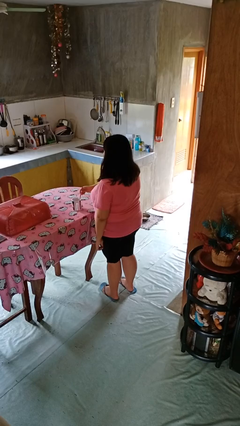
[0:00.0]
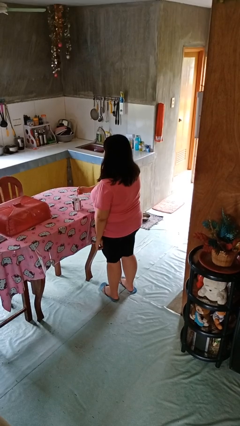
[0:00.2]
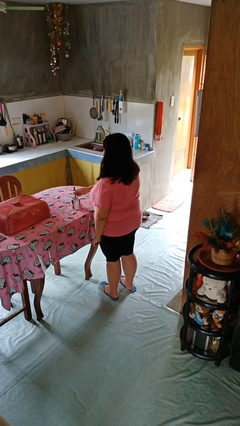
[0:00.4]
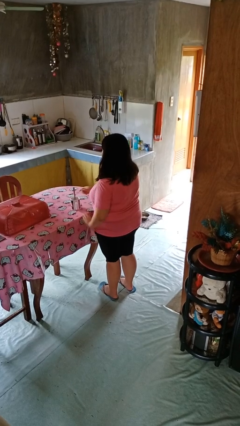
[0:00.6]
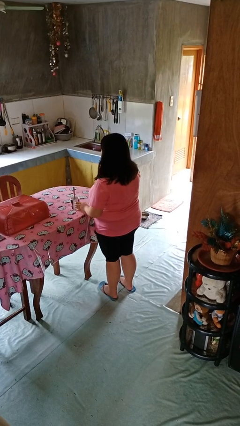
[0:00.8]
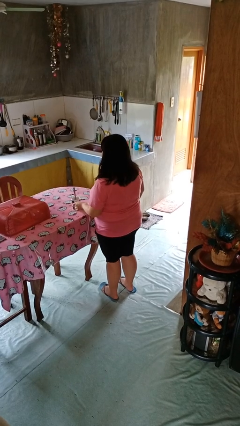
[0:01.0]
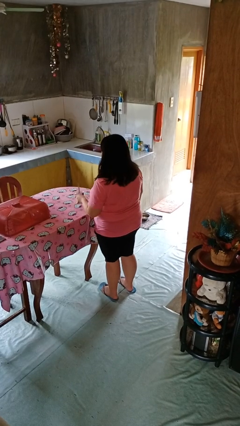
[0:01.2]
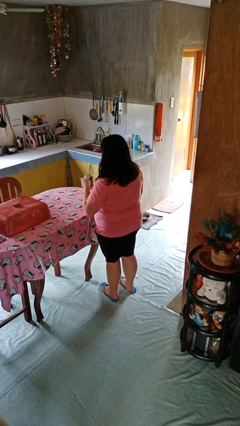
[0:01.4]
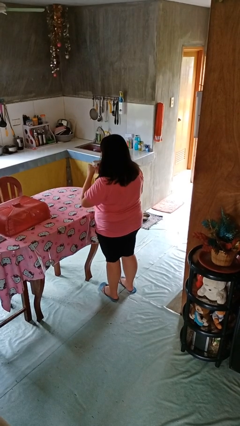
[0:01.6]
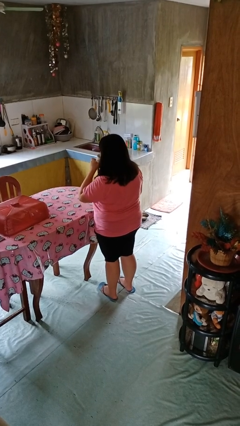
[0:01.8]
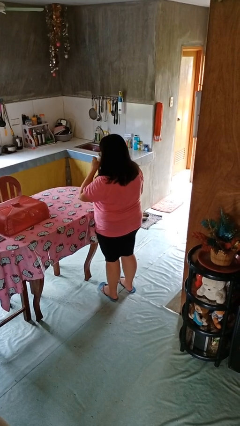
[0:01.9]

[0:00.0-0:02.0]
person stirs mug

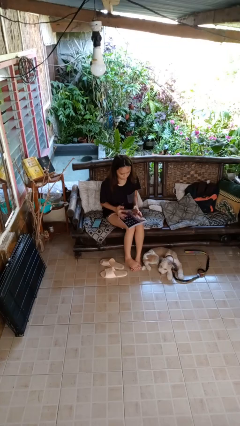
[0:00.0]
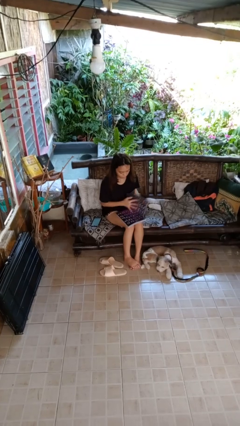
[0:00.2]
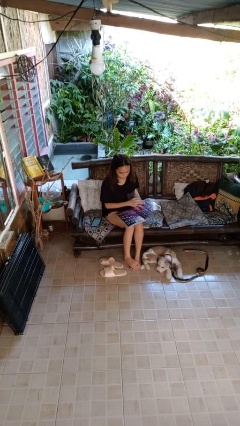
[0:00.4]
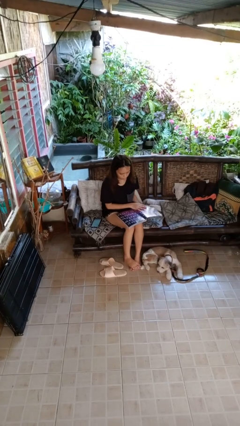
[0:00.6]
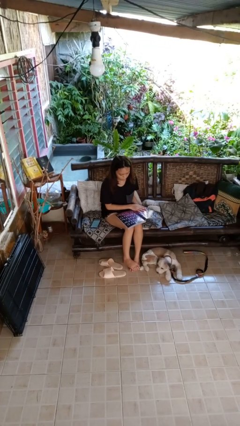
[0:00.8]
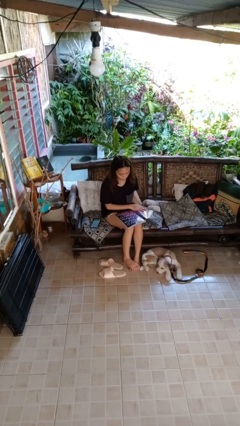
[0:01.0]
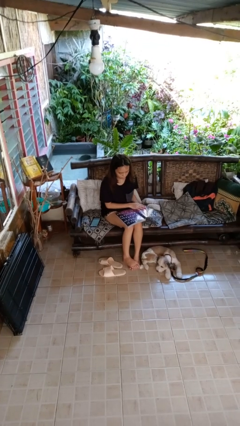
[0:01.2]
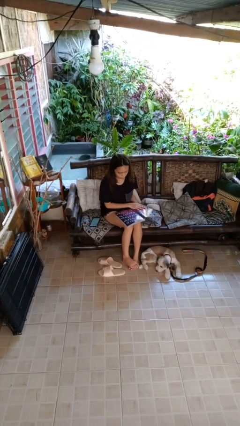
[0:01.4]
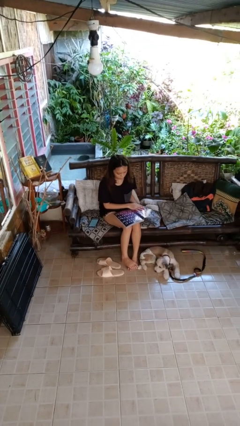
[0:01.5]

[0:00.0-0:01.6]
person reads magazine

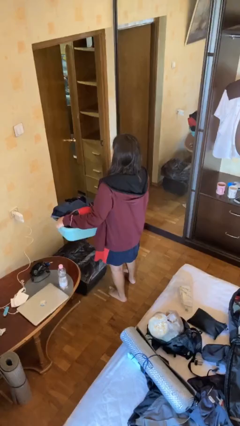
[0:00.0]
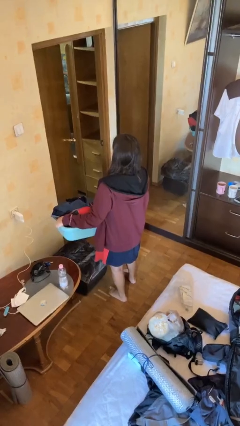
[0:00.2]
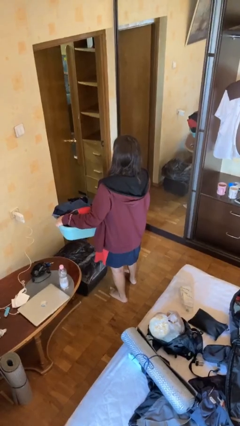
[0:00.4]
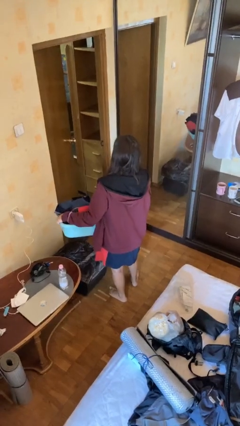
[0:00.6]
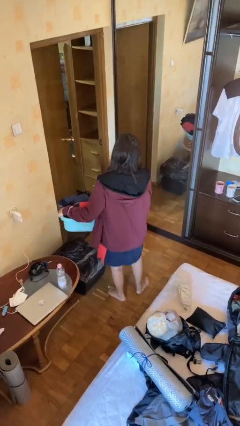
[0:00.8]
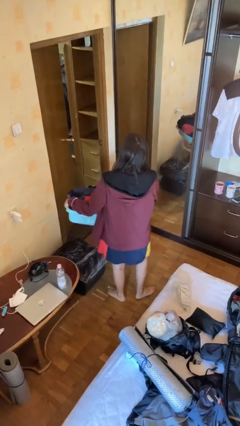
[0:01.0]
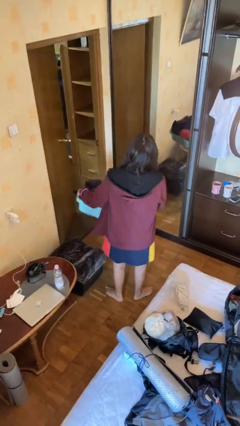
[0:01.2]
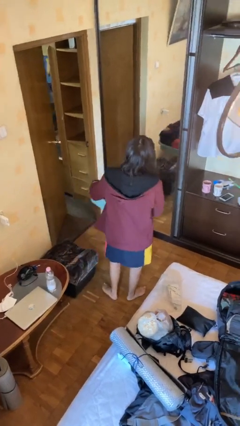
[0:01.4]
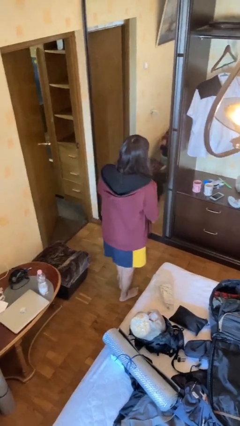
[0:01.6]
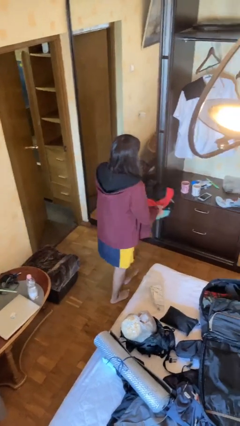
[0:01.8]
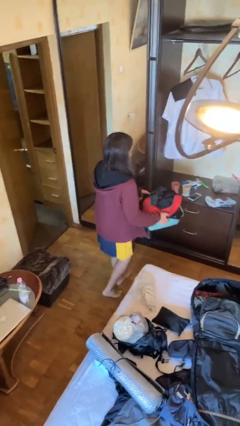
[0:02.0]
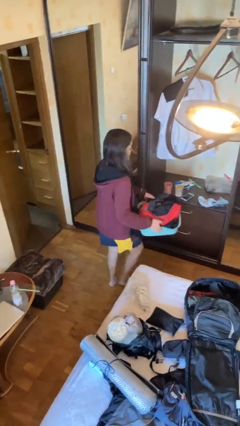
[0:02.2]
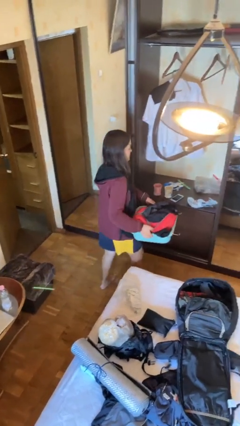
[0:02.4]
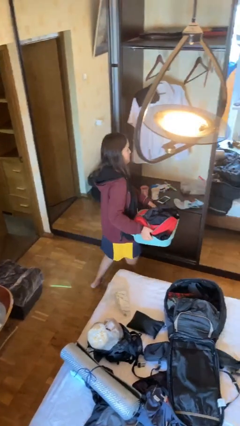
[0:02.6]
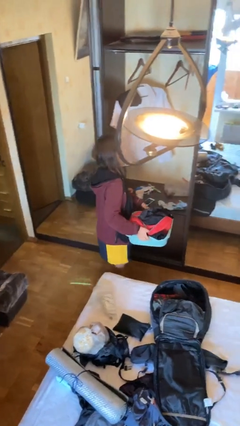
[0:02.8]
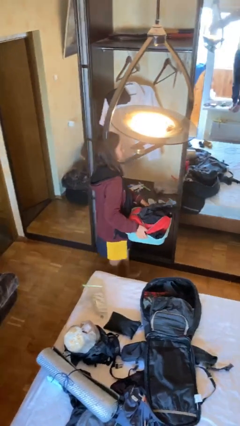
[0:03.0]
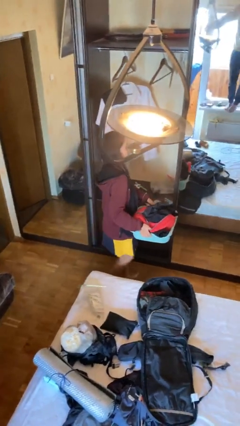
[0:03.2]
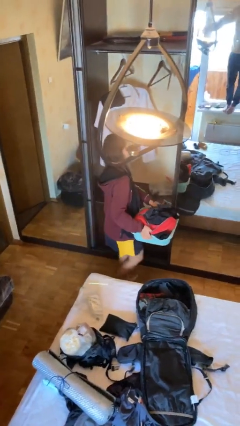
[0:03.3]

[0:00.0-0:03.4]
person carries laundry basket

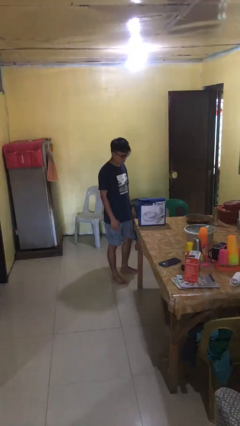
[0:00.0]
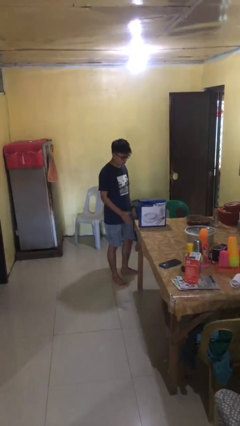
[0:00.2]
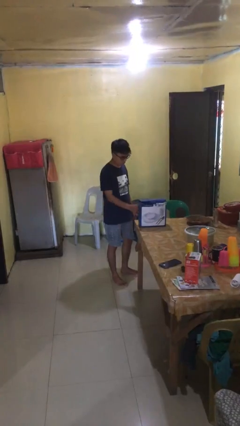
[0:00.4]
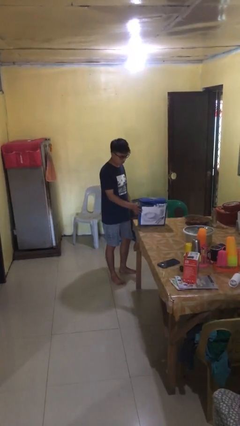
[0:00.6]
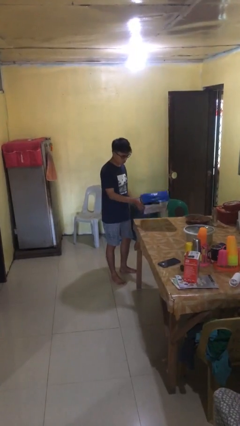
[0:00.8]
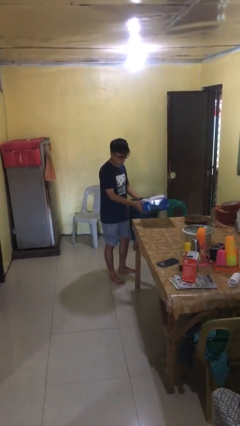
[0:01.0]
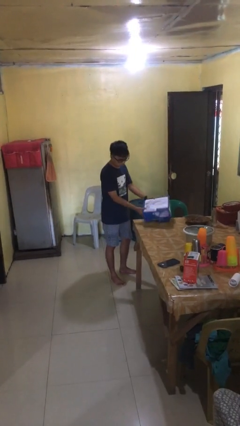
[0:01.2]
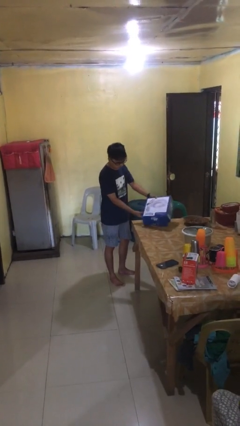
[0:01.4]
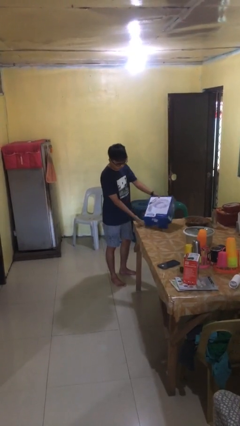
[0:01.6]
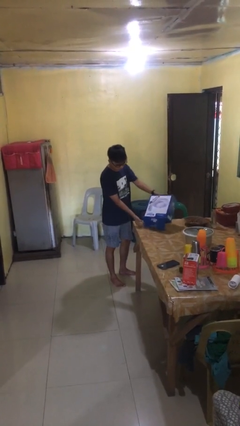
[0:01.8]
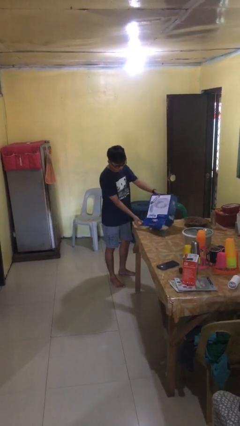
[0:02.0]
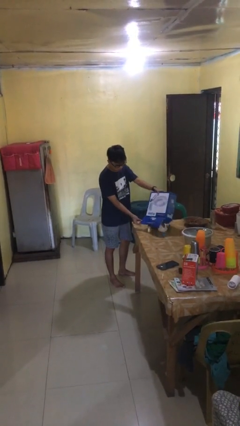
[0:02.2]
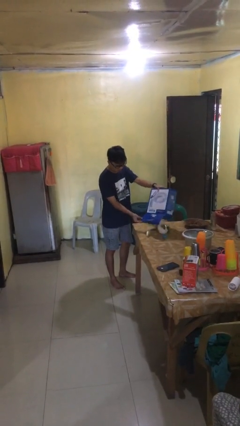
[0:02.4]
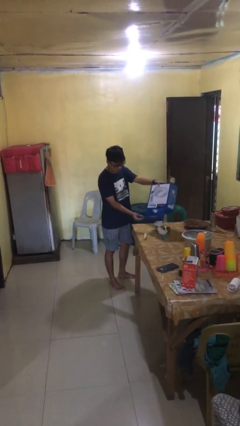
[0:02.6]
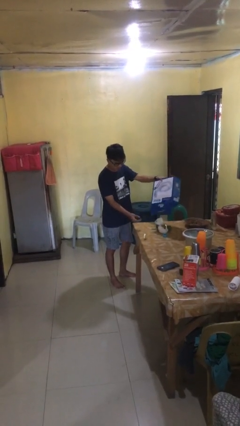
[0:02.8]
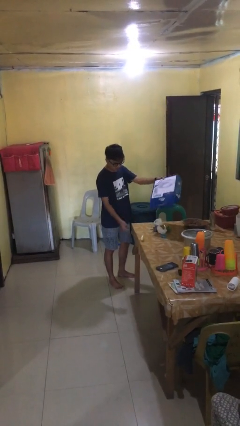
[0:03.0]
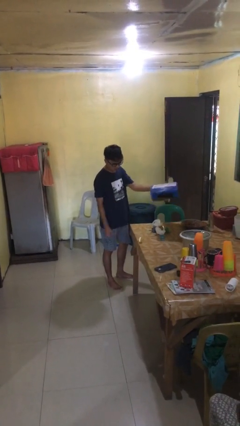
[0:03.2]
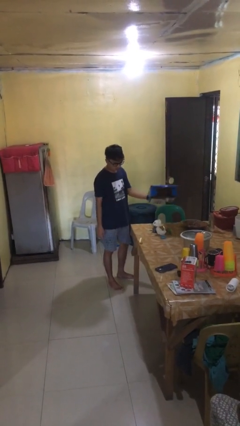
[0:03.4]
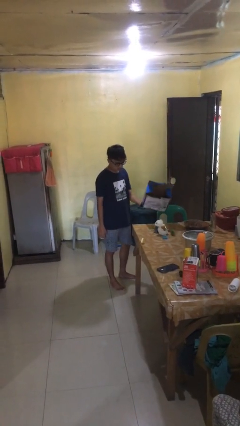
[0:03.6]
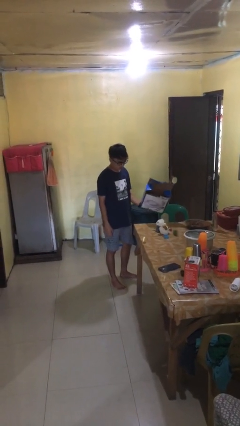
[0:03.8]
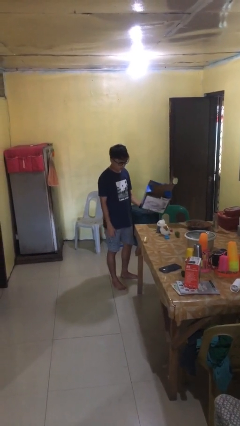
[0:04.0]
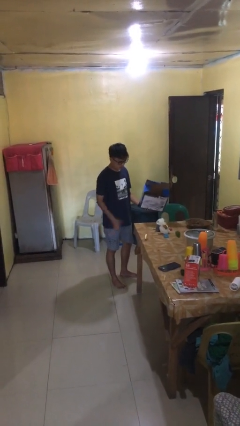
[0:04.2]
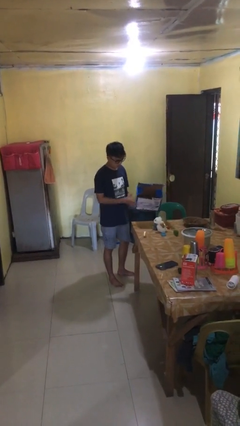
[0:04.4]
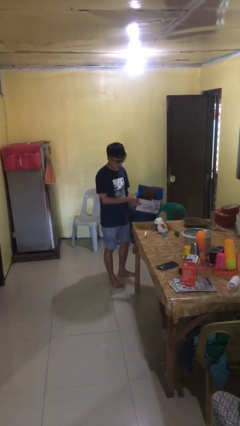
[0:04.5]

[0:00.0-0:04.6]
person unloads box onto table

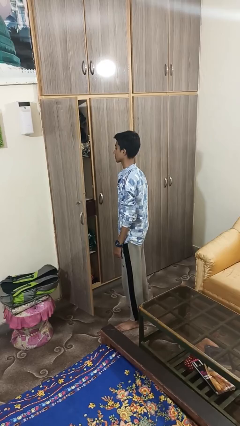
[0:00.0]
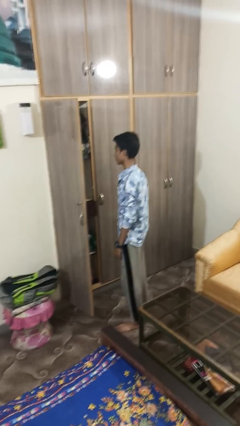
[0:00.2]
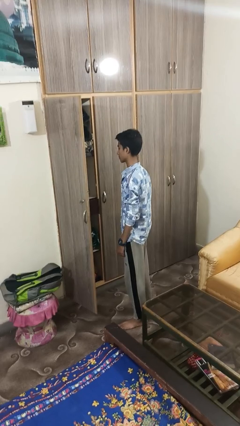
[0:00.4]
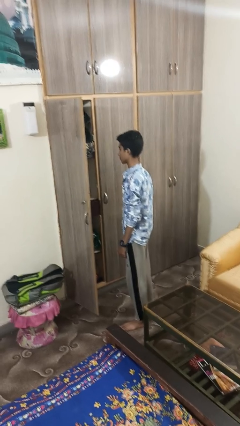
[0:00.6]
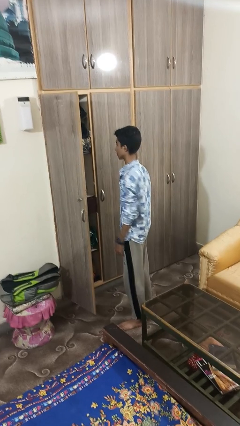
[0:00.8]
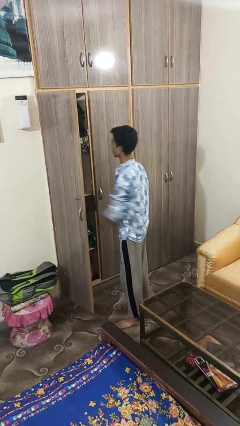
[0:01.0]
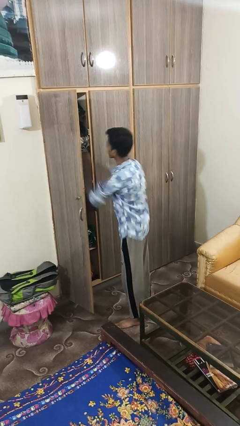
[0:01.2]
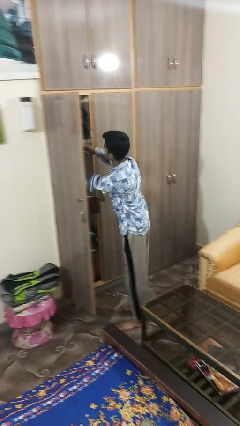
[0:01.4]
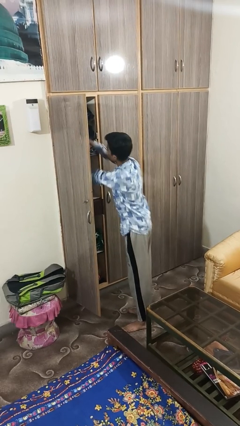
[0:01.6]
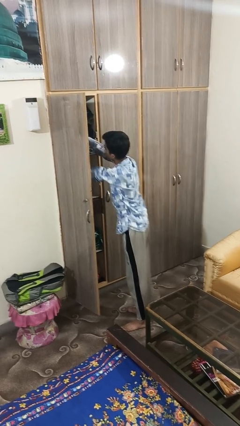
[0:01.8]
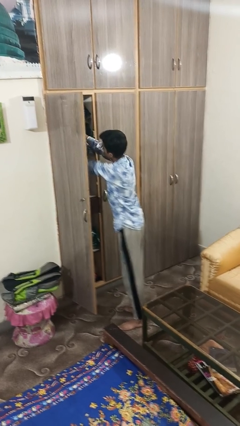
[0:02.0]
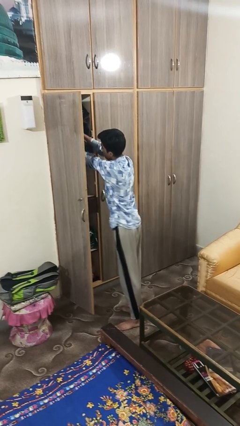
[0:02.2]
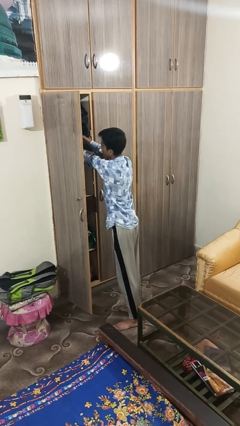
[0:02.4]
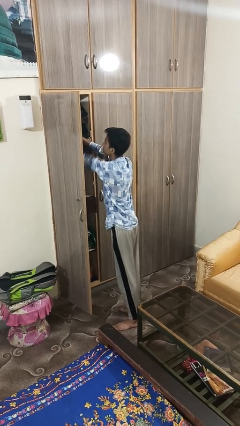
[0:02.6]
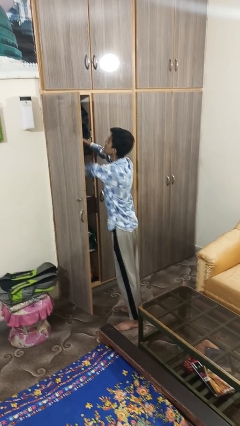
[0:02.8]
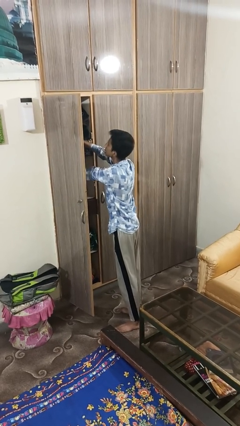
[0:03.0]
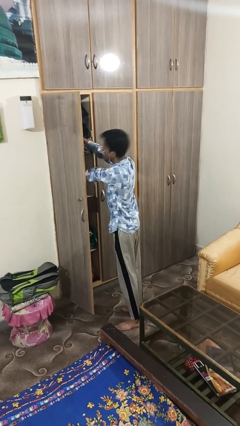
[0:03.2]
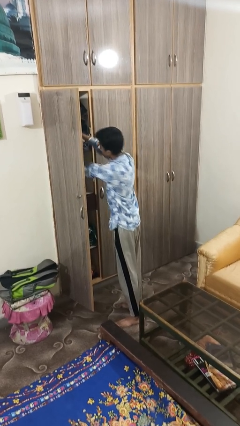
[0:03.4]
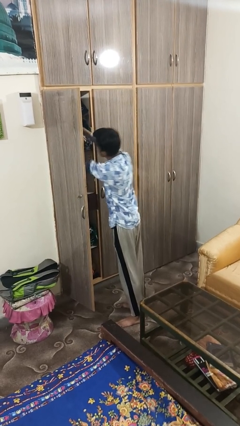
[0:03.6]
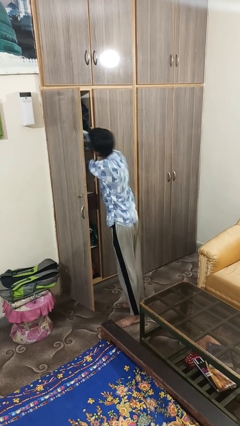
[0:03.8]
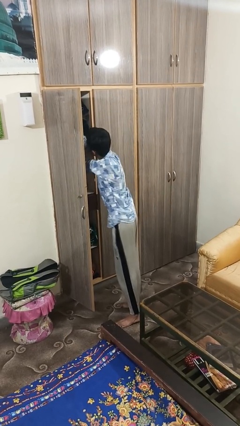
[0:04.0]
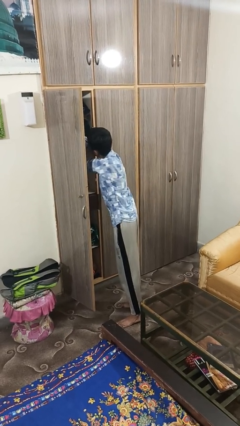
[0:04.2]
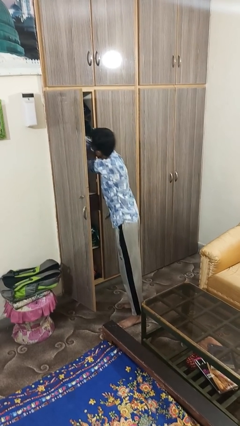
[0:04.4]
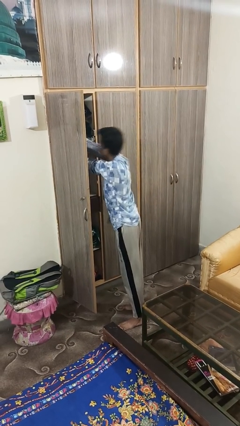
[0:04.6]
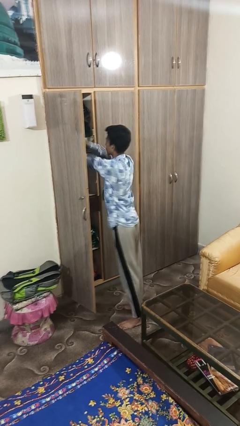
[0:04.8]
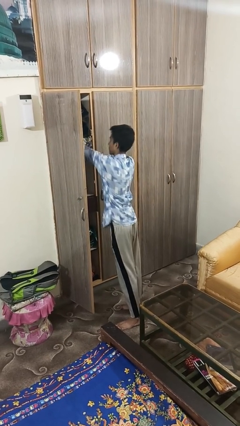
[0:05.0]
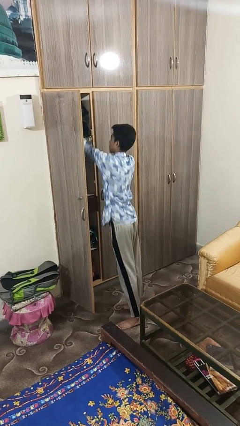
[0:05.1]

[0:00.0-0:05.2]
person searches in cabinet

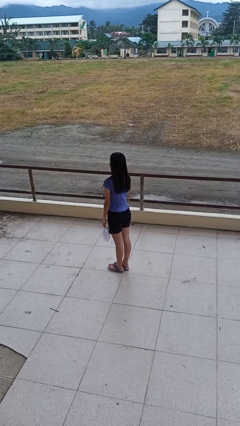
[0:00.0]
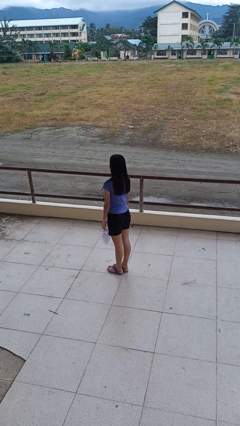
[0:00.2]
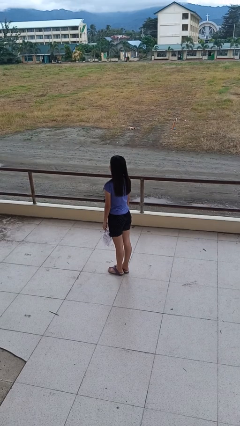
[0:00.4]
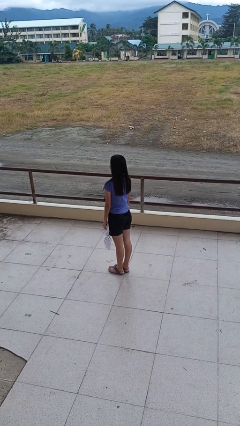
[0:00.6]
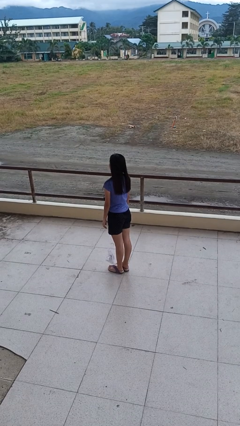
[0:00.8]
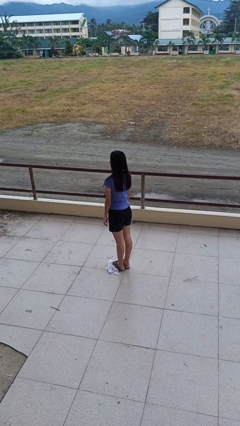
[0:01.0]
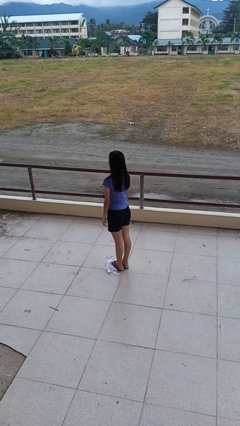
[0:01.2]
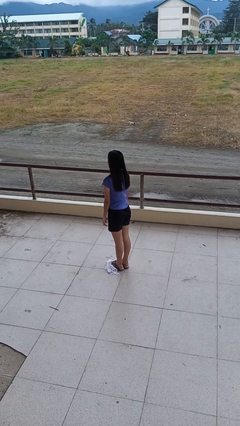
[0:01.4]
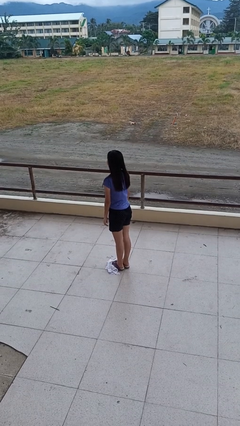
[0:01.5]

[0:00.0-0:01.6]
person drops object
